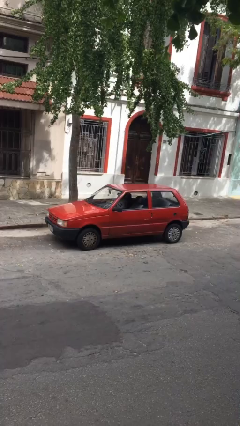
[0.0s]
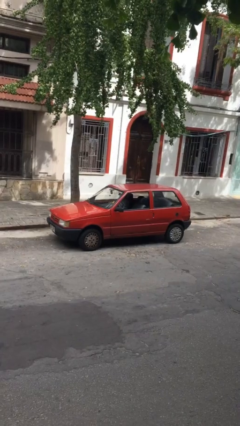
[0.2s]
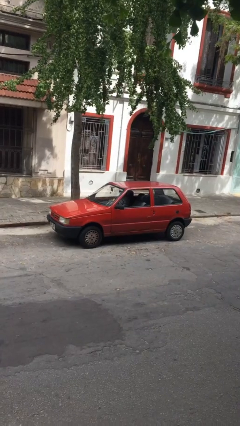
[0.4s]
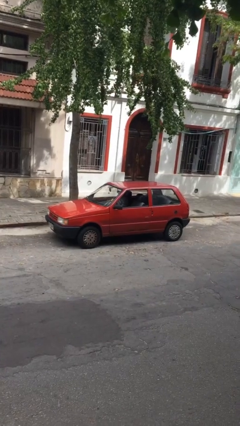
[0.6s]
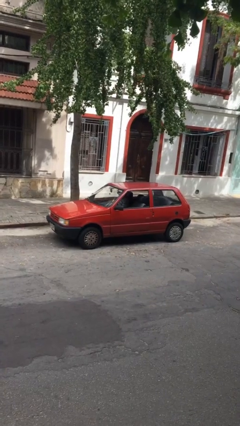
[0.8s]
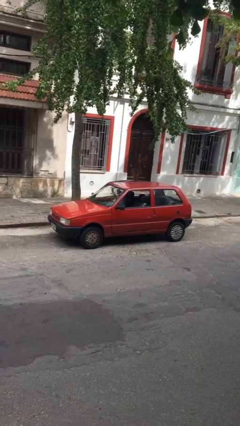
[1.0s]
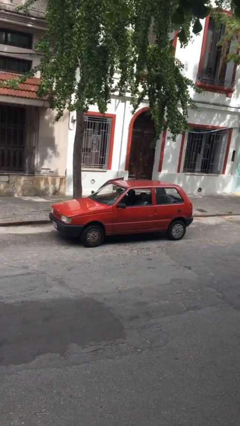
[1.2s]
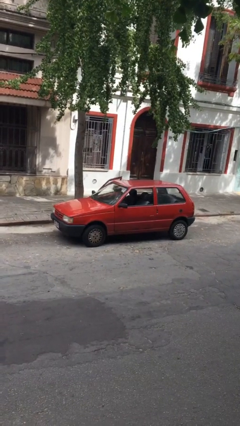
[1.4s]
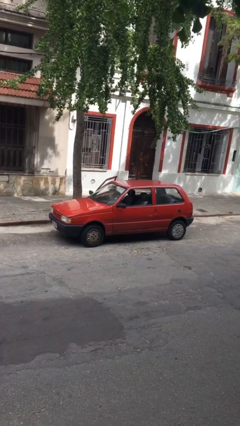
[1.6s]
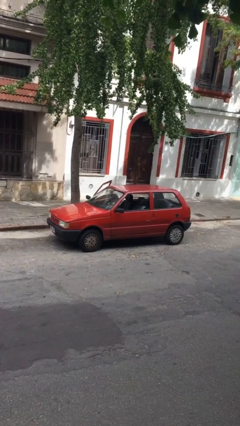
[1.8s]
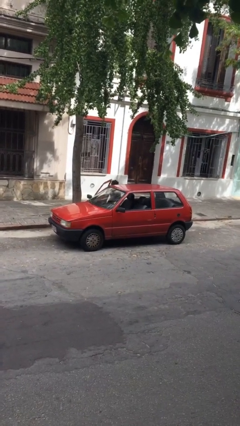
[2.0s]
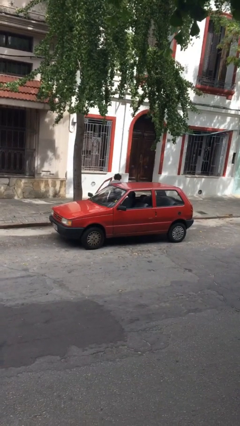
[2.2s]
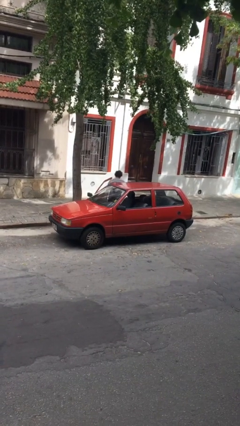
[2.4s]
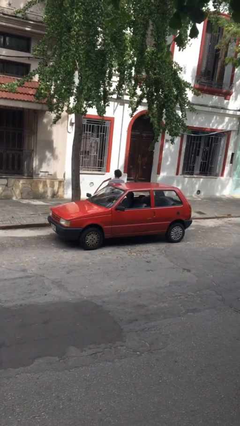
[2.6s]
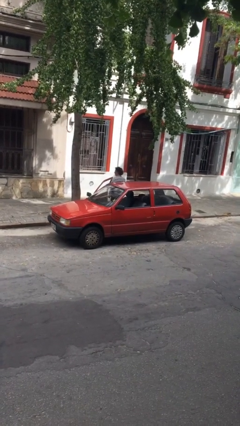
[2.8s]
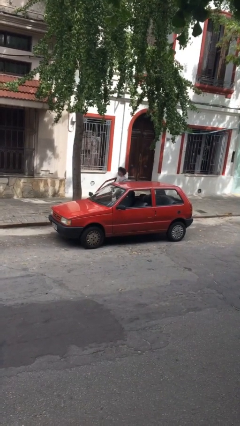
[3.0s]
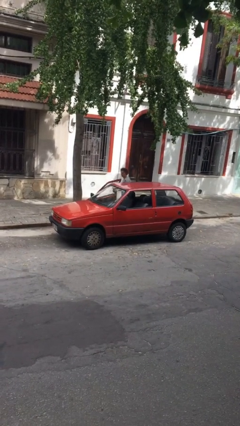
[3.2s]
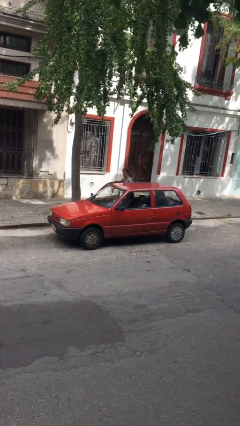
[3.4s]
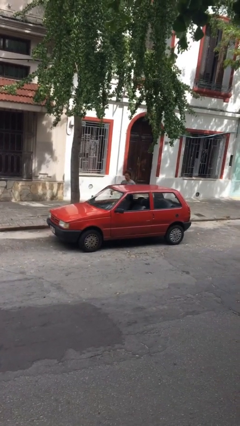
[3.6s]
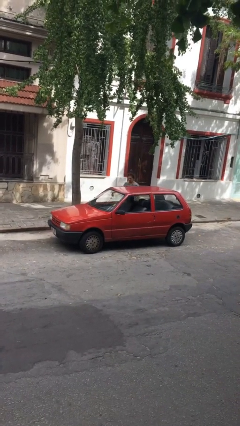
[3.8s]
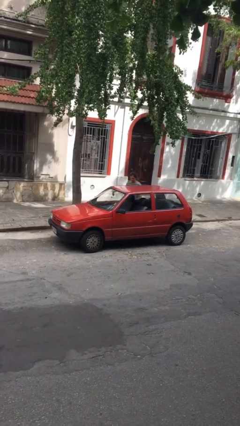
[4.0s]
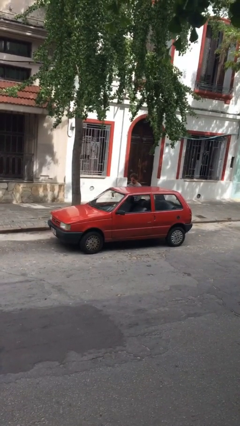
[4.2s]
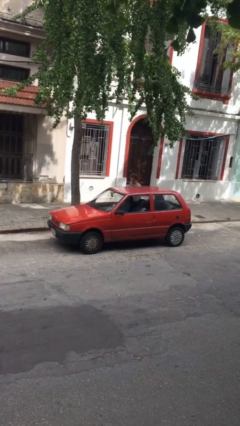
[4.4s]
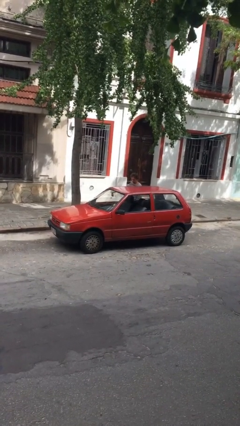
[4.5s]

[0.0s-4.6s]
car drops off person

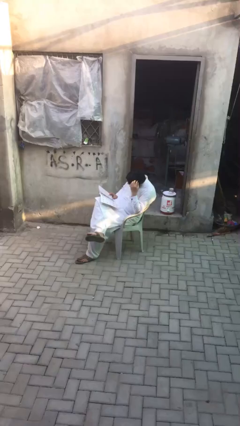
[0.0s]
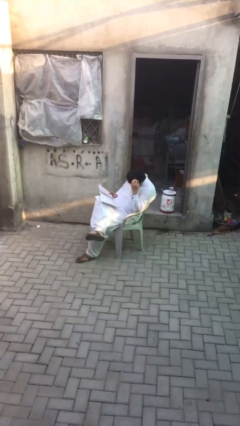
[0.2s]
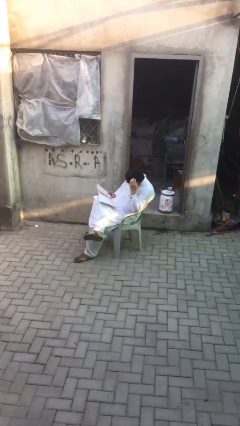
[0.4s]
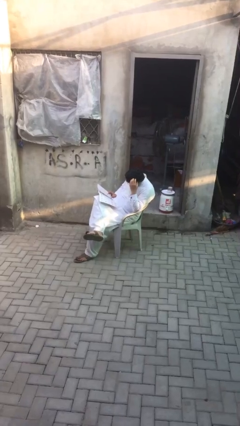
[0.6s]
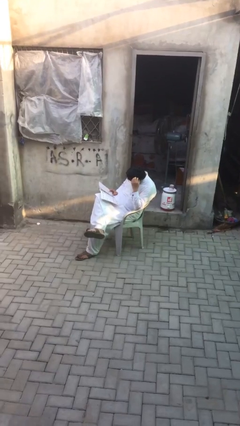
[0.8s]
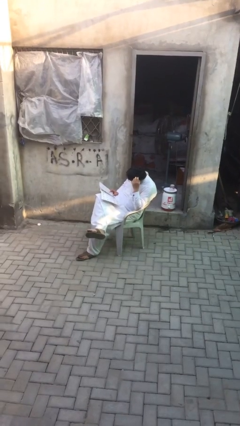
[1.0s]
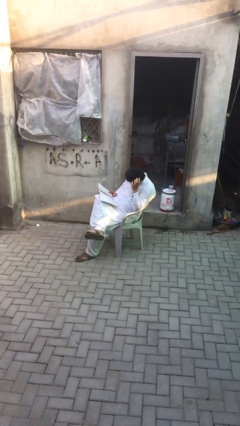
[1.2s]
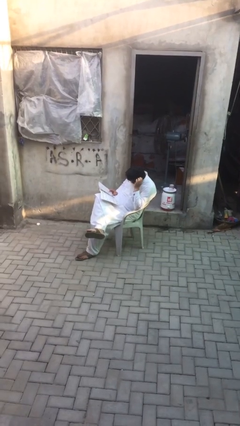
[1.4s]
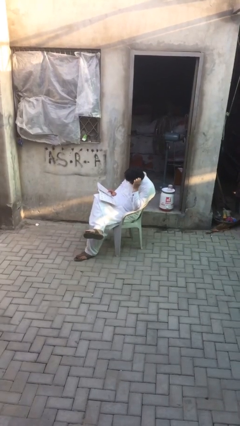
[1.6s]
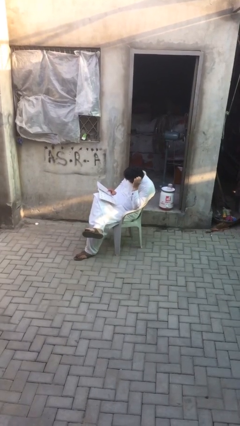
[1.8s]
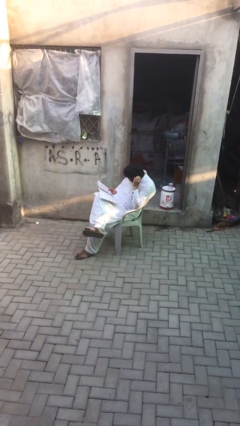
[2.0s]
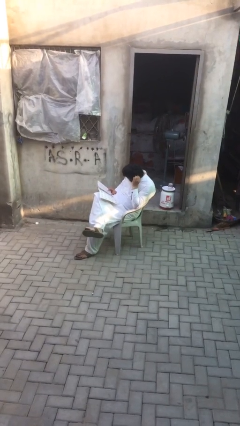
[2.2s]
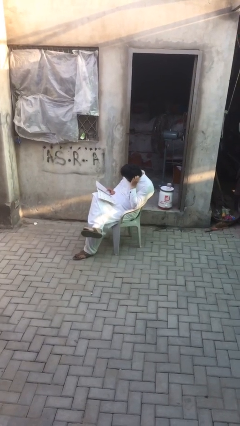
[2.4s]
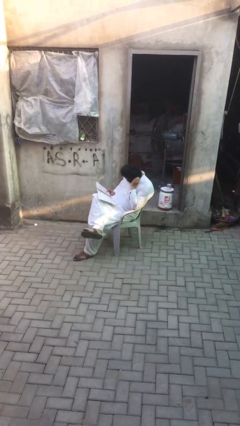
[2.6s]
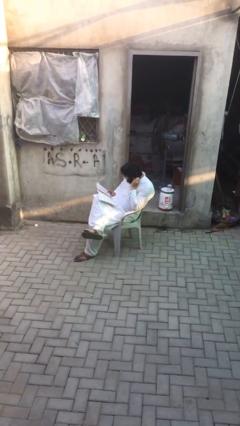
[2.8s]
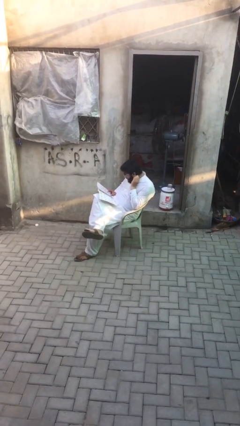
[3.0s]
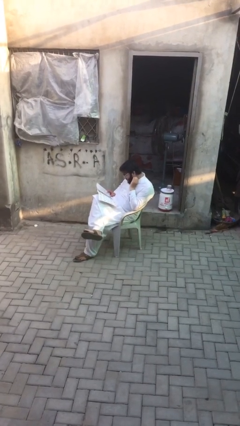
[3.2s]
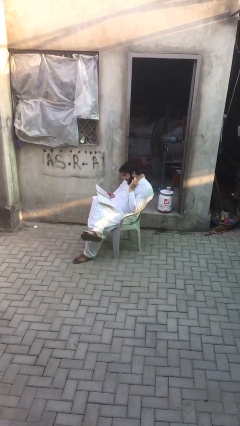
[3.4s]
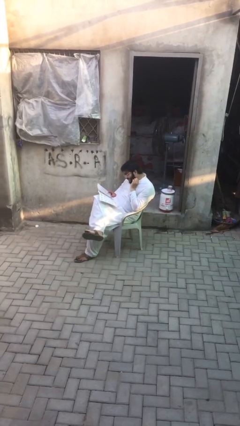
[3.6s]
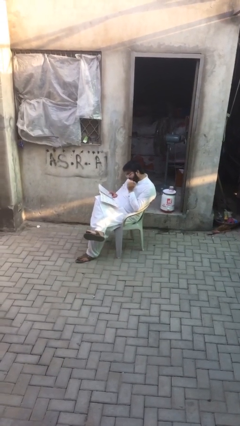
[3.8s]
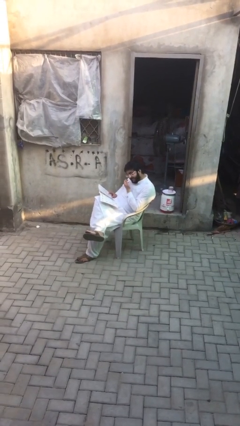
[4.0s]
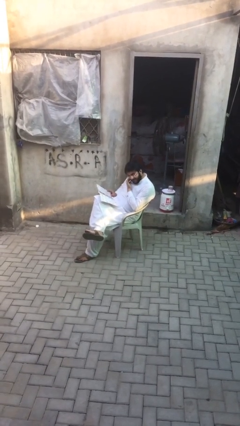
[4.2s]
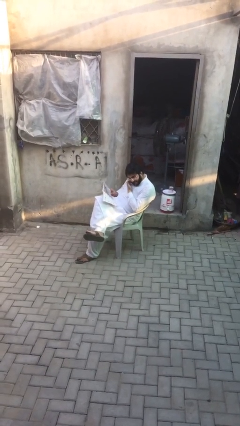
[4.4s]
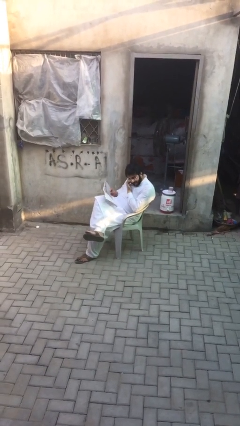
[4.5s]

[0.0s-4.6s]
person reads document

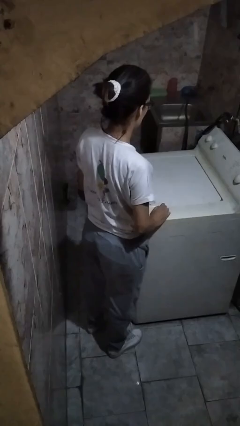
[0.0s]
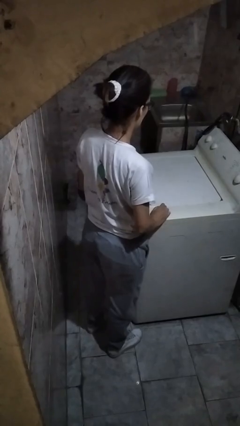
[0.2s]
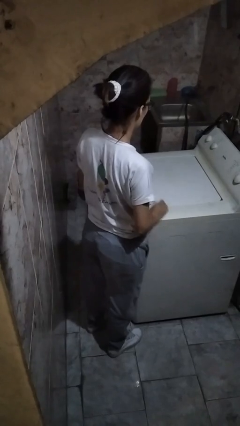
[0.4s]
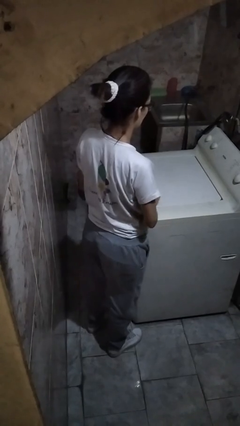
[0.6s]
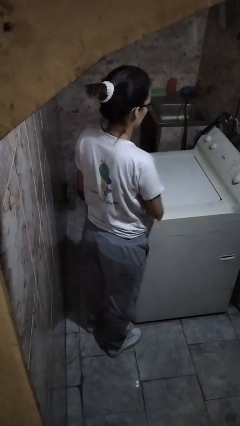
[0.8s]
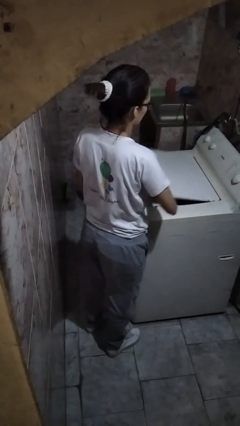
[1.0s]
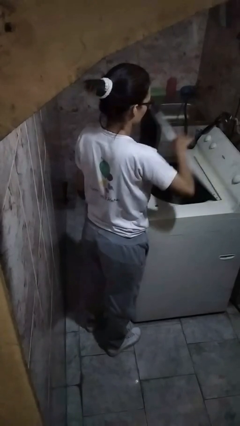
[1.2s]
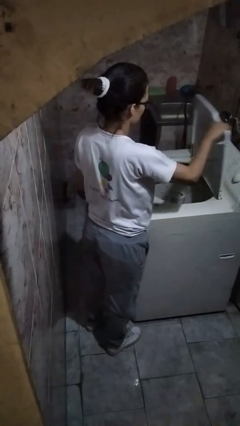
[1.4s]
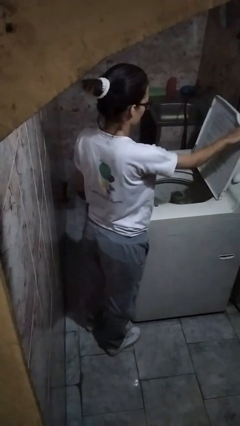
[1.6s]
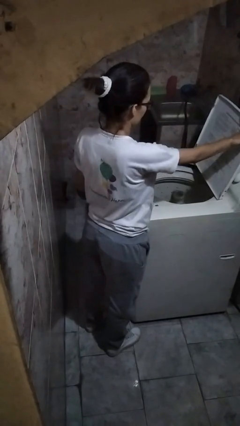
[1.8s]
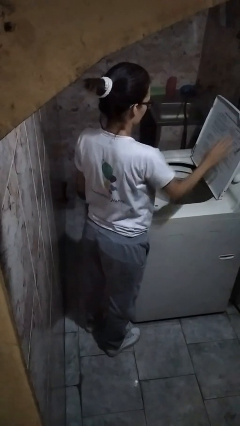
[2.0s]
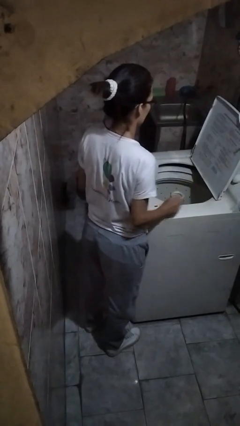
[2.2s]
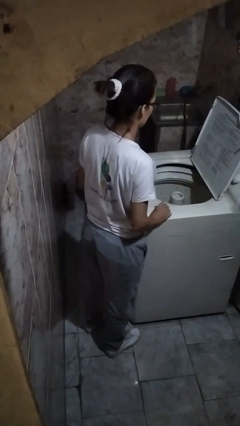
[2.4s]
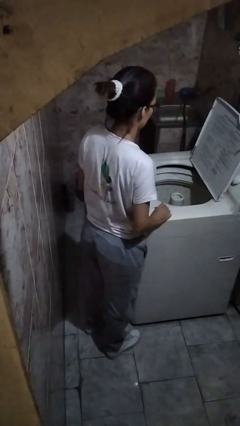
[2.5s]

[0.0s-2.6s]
person opens clothes washer

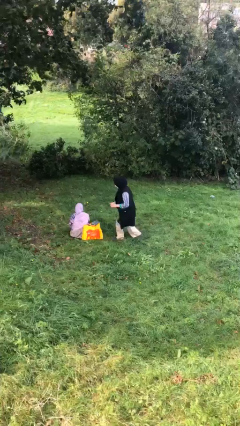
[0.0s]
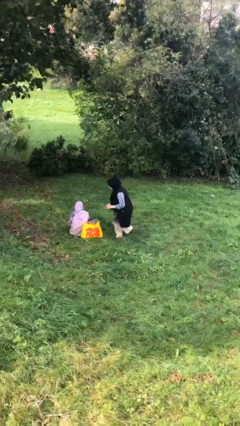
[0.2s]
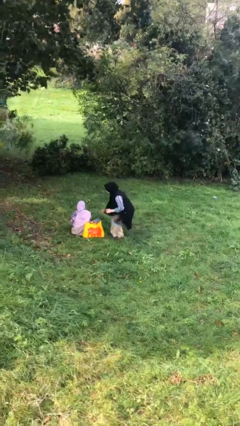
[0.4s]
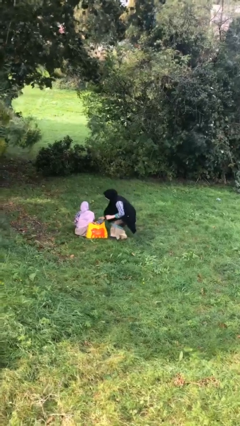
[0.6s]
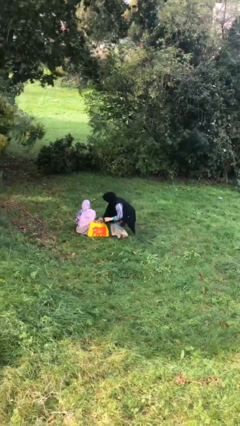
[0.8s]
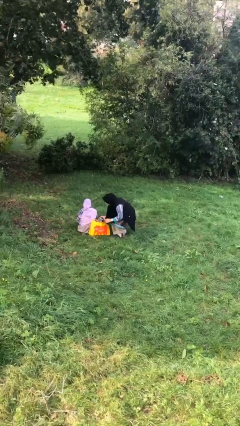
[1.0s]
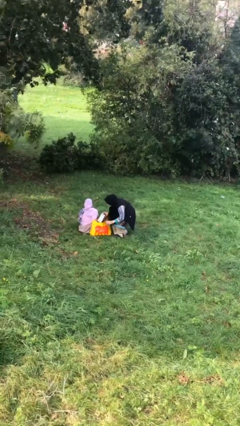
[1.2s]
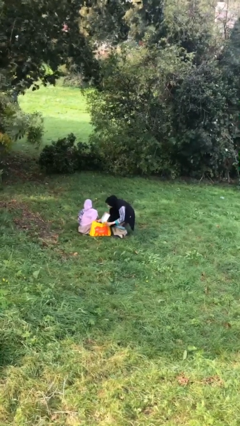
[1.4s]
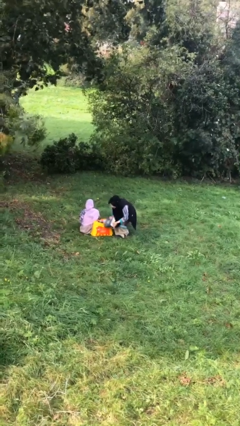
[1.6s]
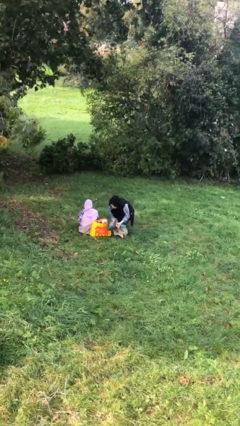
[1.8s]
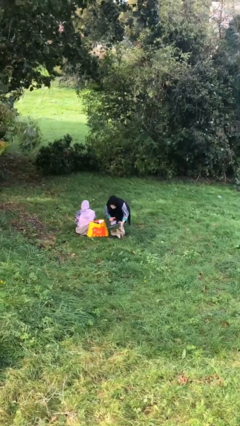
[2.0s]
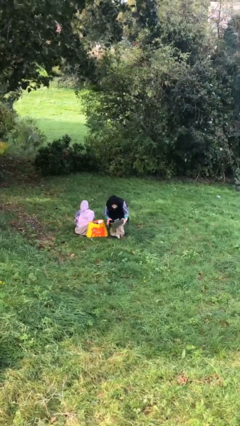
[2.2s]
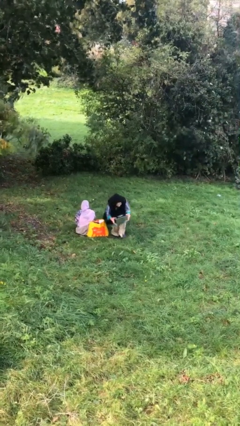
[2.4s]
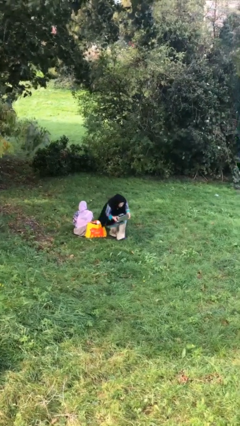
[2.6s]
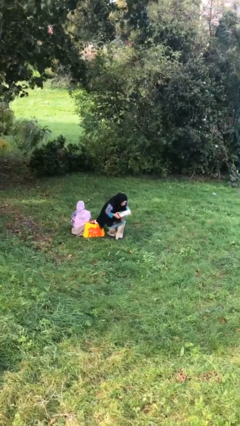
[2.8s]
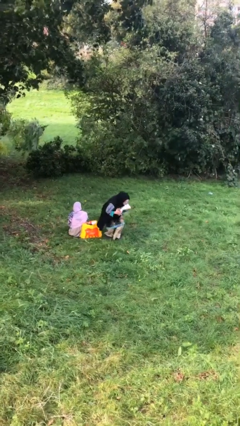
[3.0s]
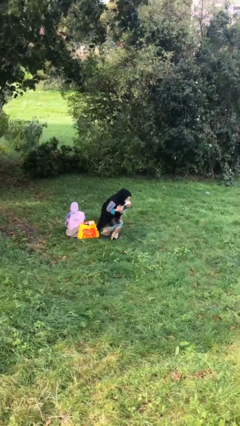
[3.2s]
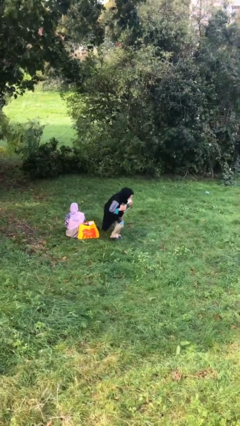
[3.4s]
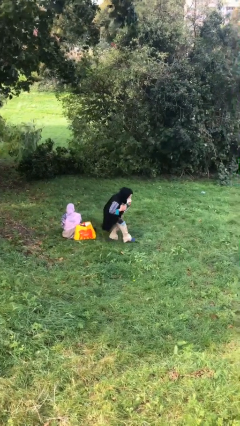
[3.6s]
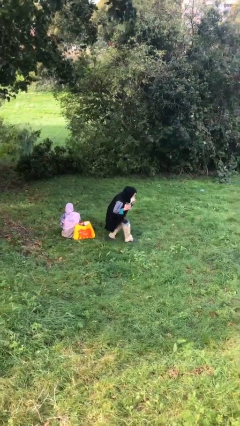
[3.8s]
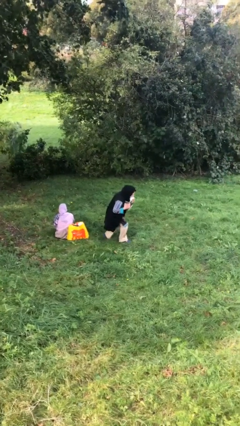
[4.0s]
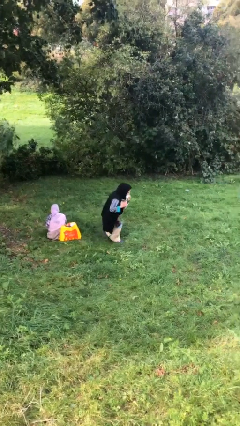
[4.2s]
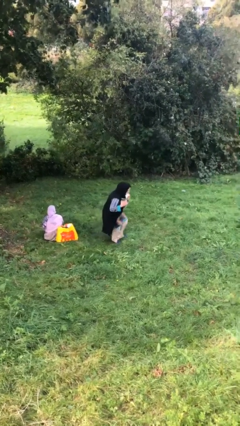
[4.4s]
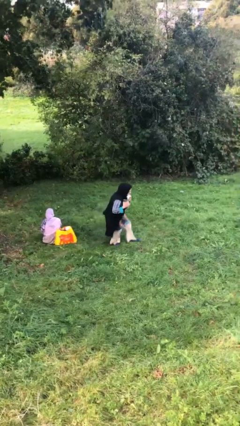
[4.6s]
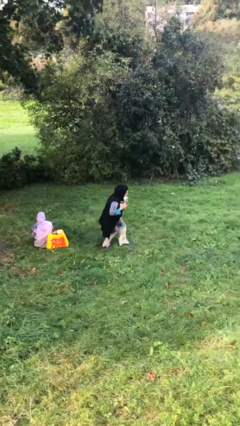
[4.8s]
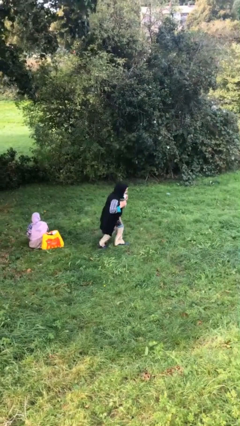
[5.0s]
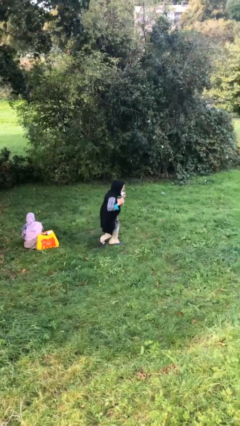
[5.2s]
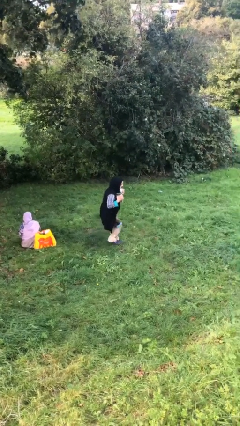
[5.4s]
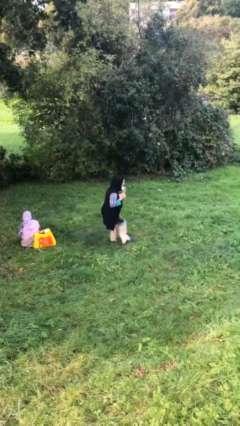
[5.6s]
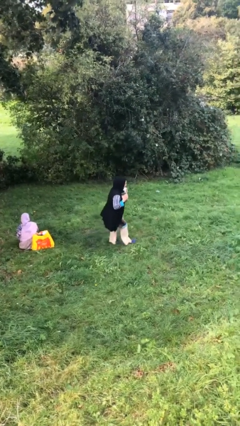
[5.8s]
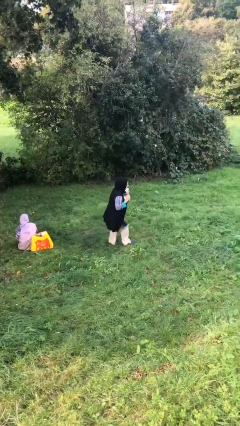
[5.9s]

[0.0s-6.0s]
person steals object from person
